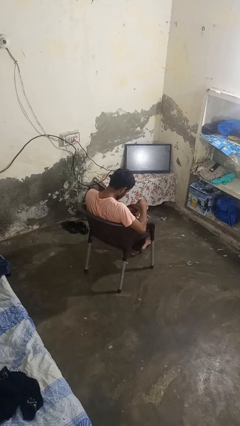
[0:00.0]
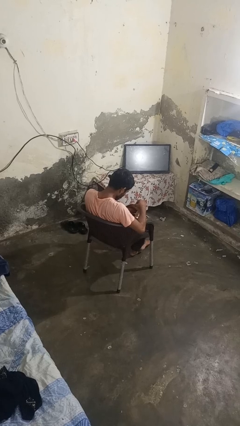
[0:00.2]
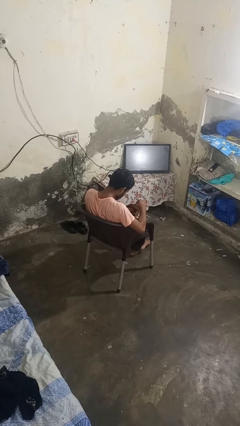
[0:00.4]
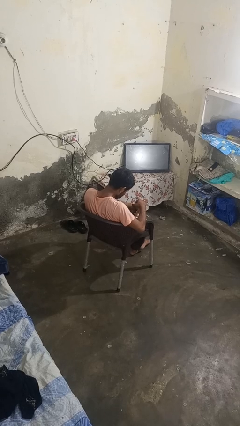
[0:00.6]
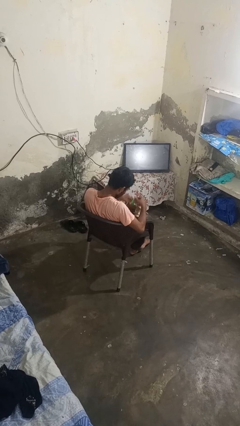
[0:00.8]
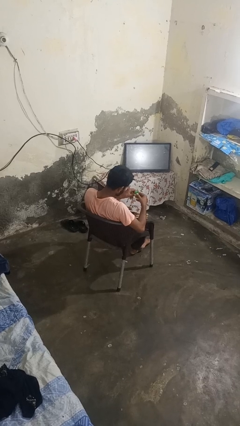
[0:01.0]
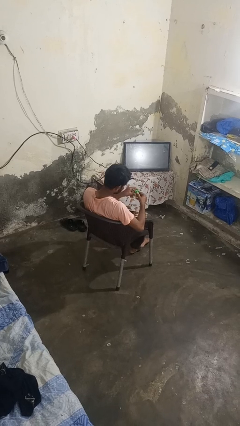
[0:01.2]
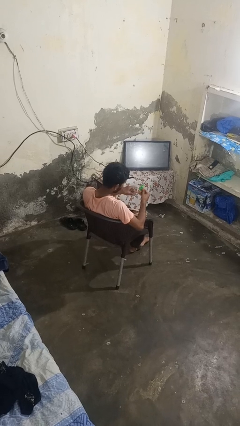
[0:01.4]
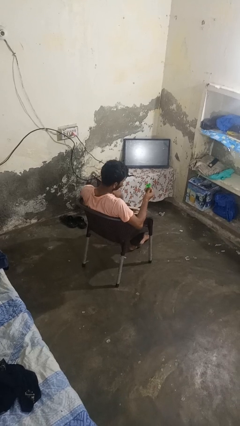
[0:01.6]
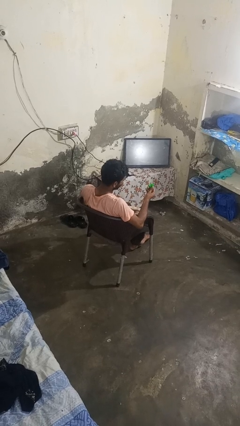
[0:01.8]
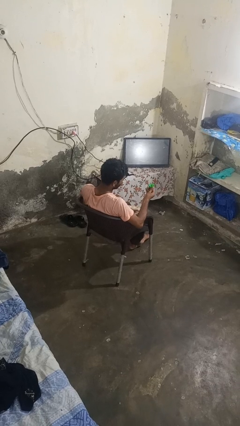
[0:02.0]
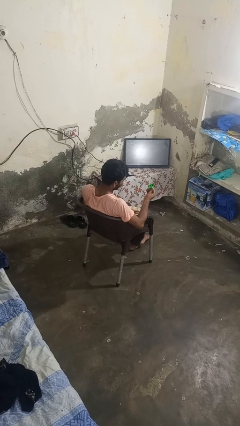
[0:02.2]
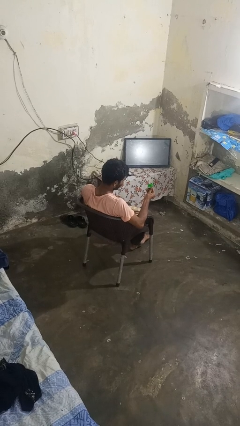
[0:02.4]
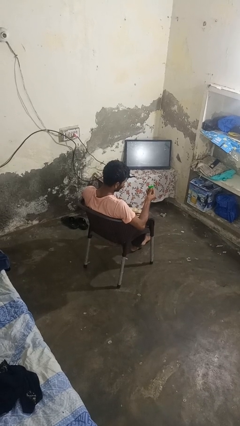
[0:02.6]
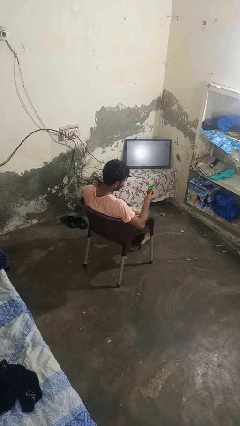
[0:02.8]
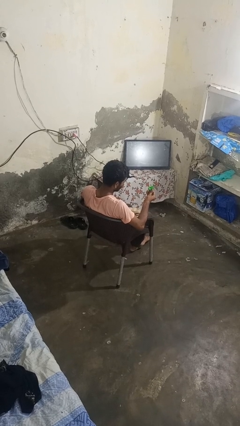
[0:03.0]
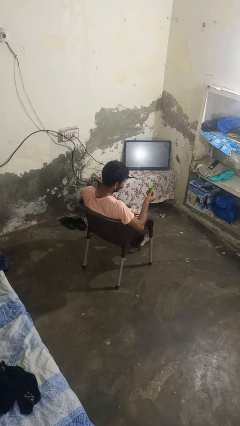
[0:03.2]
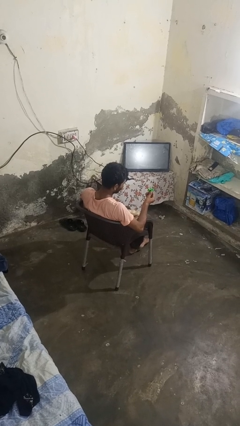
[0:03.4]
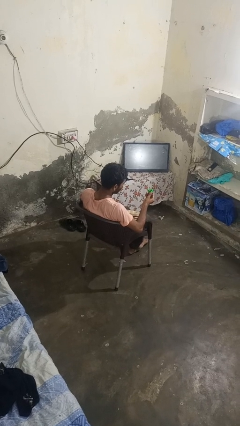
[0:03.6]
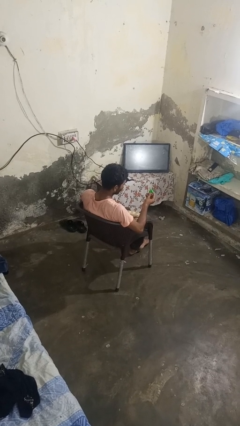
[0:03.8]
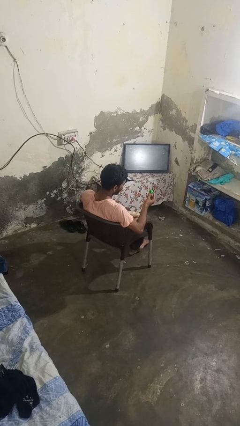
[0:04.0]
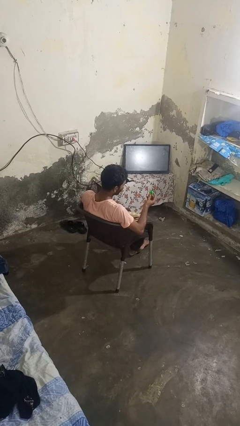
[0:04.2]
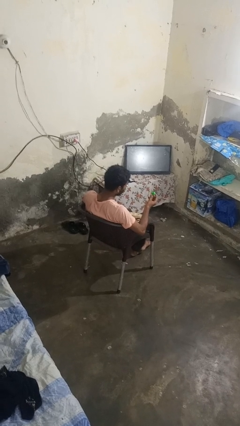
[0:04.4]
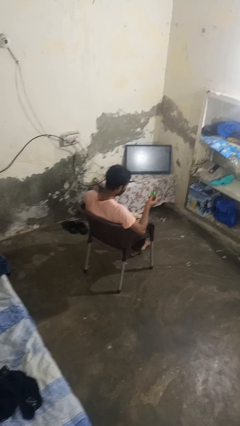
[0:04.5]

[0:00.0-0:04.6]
person takes object from purse

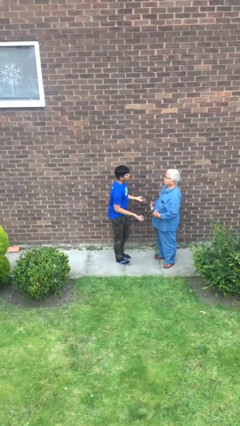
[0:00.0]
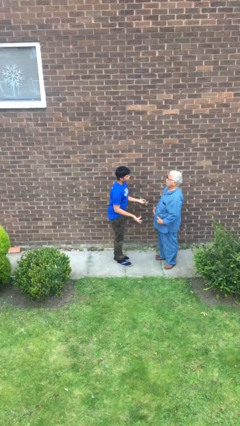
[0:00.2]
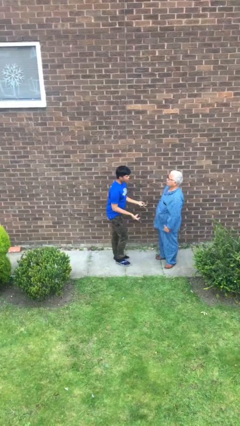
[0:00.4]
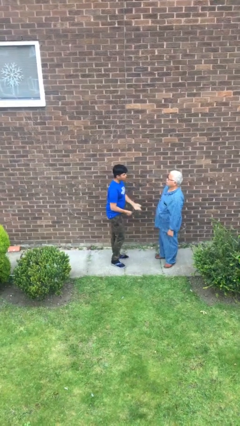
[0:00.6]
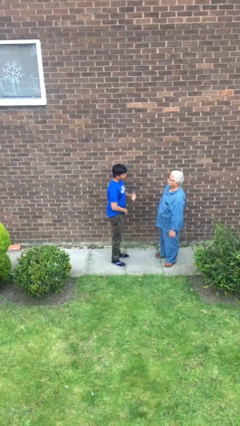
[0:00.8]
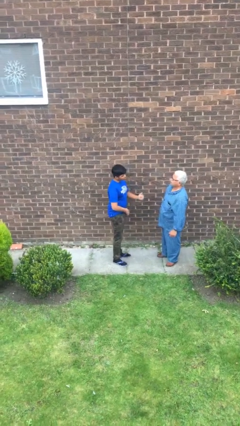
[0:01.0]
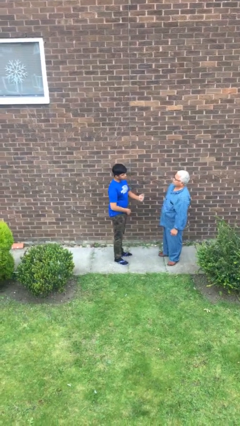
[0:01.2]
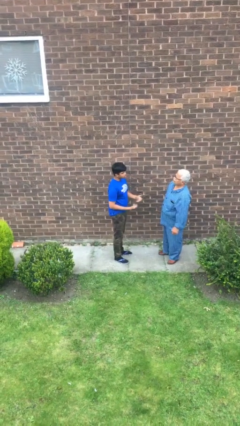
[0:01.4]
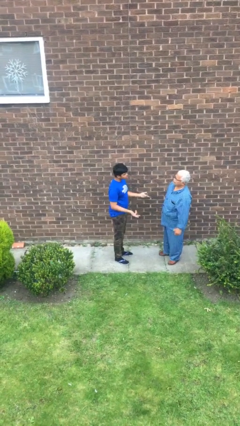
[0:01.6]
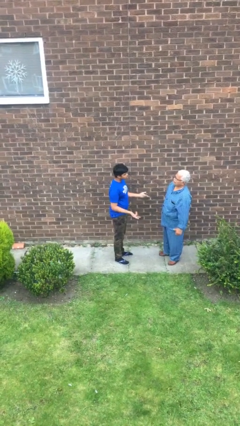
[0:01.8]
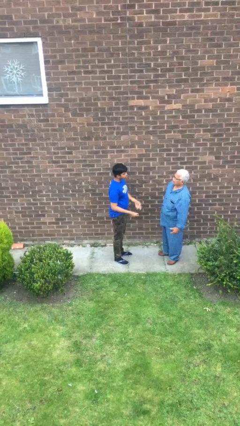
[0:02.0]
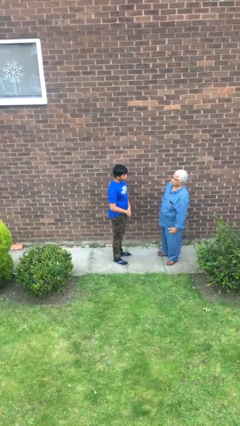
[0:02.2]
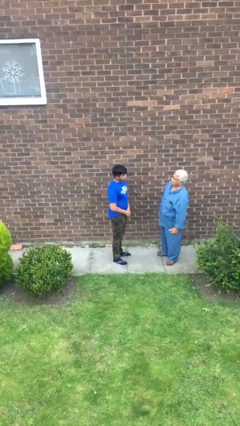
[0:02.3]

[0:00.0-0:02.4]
person talks to person

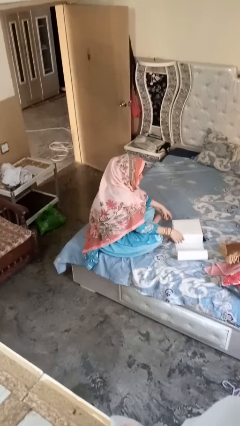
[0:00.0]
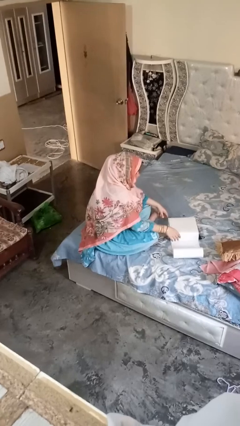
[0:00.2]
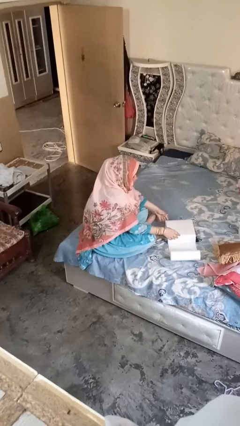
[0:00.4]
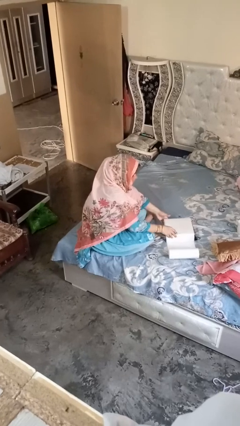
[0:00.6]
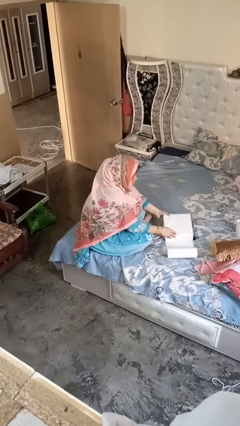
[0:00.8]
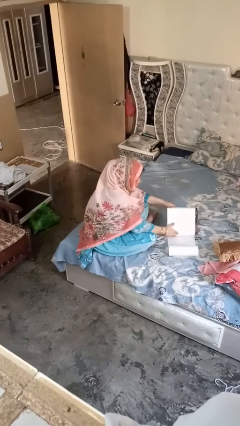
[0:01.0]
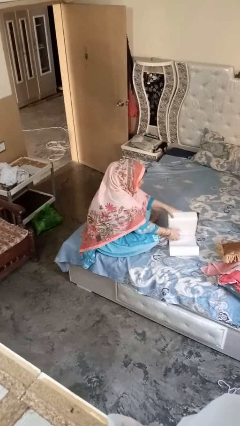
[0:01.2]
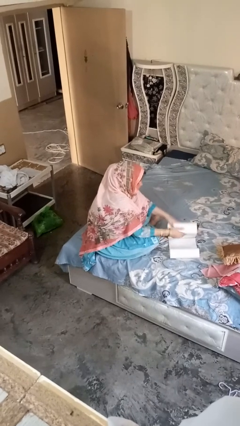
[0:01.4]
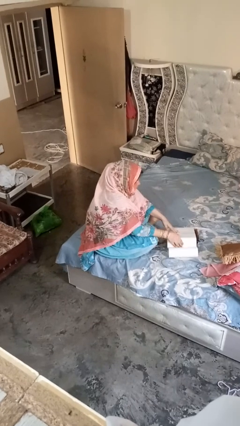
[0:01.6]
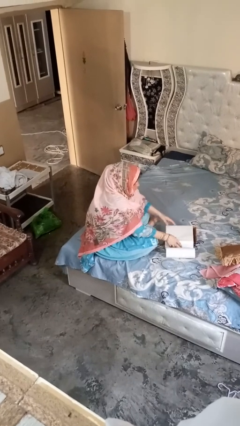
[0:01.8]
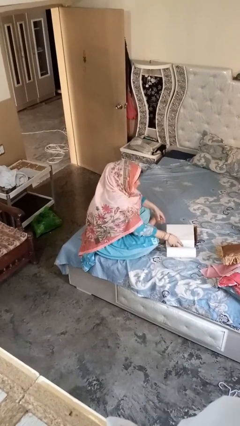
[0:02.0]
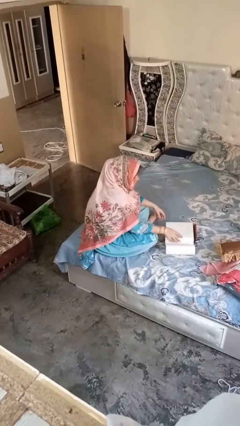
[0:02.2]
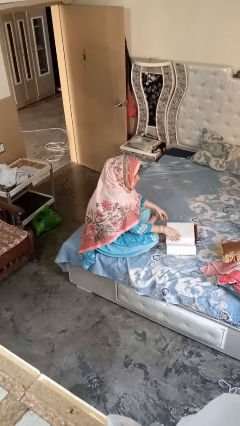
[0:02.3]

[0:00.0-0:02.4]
person wraps box

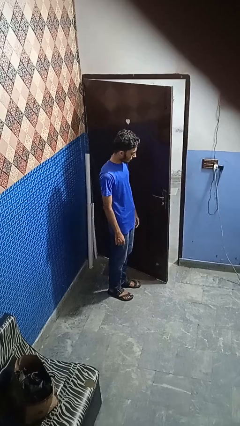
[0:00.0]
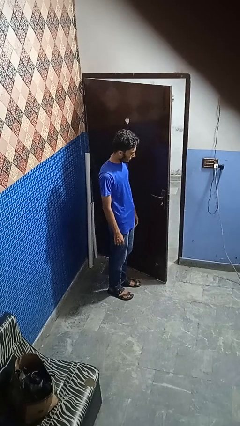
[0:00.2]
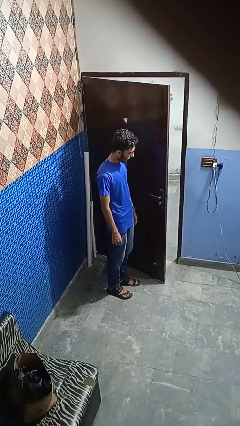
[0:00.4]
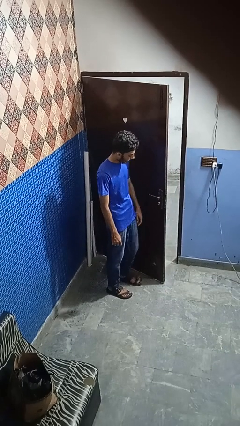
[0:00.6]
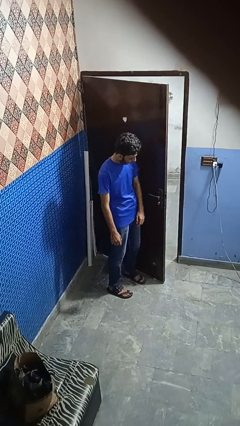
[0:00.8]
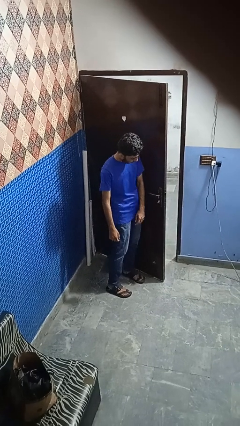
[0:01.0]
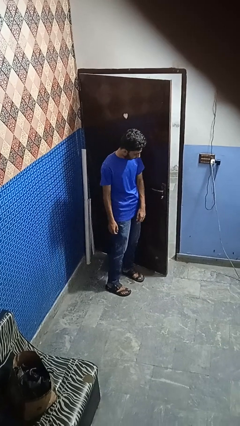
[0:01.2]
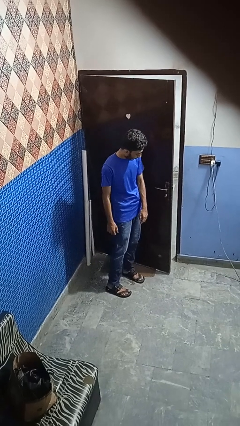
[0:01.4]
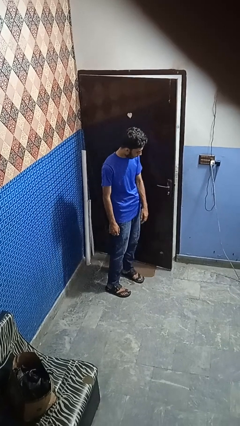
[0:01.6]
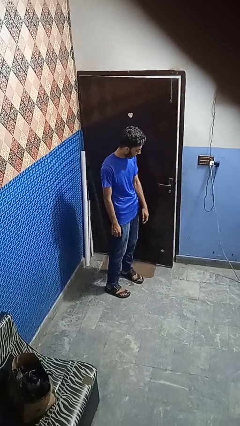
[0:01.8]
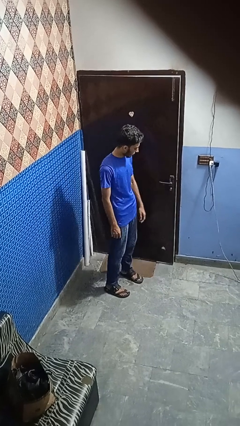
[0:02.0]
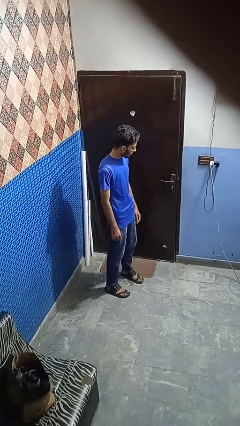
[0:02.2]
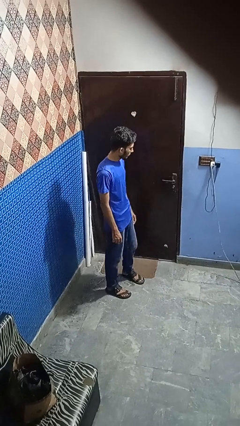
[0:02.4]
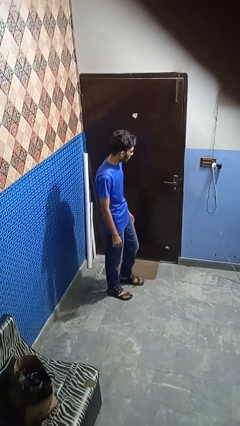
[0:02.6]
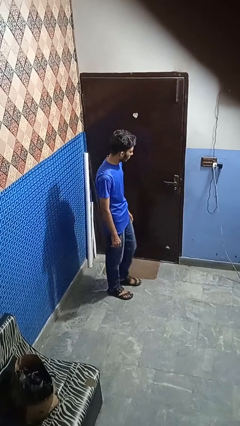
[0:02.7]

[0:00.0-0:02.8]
person closes door with hip

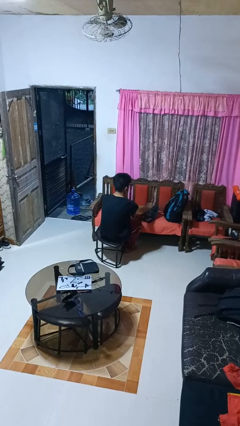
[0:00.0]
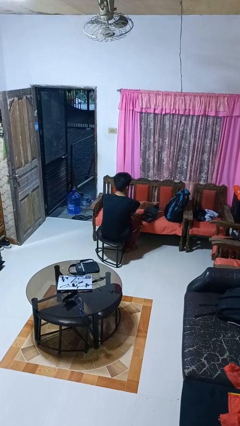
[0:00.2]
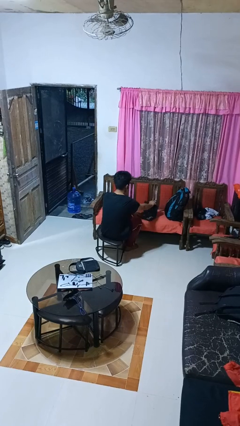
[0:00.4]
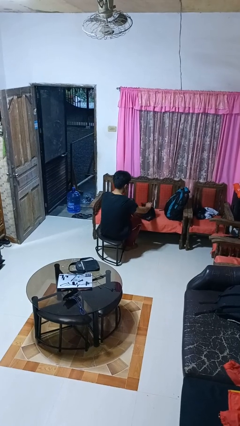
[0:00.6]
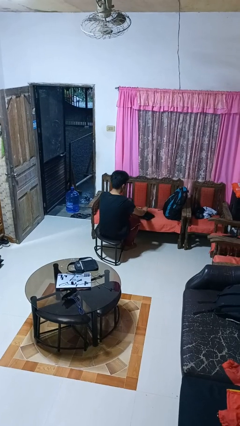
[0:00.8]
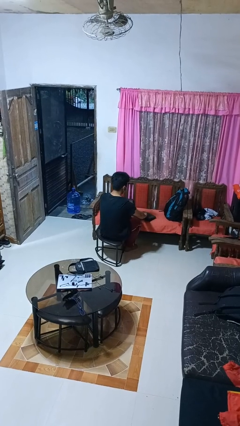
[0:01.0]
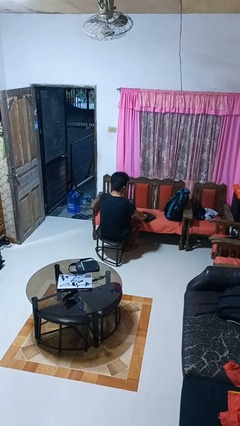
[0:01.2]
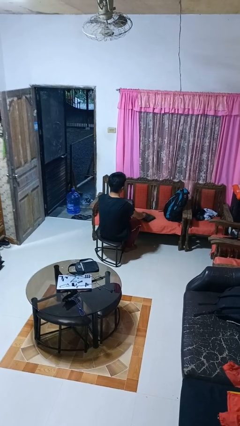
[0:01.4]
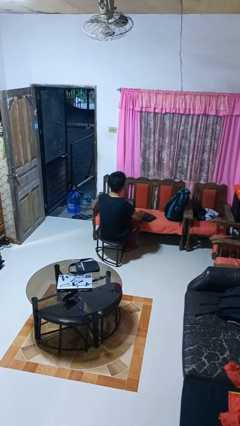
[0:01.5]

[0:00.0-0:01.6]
person closes laptop

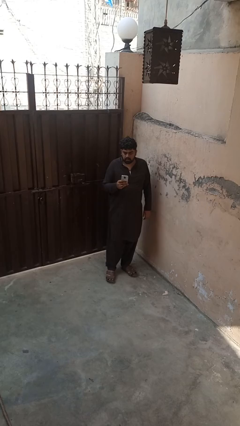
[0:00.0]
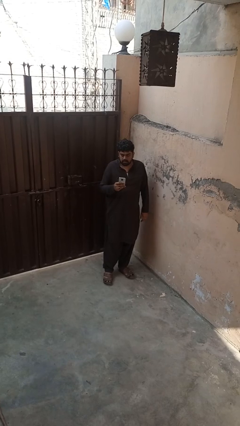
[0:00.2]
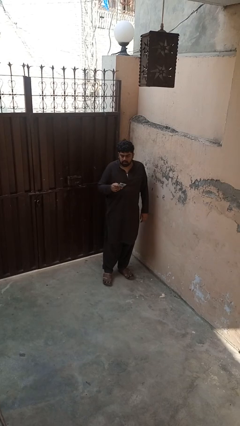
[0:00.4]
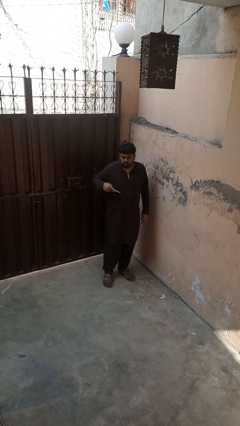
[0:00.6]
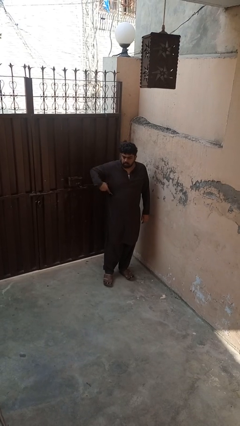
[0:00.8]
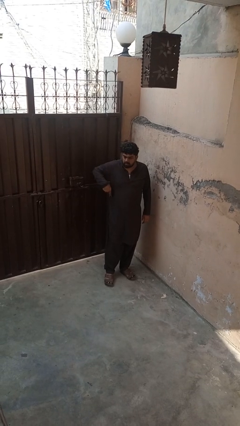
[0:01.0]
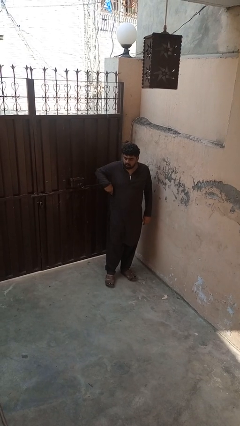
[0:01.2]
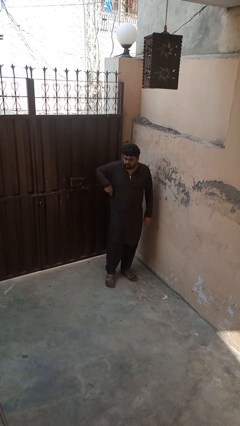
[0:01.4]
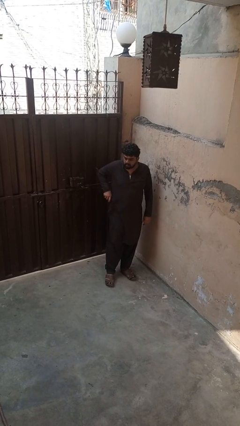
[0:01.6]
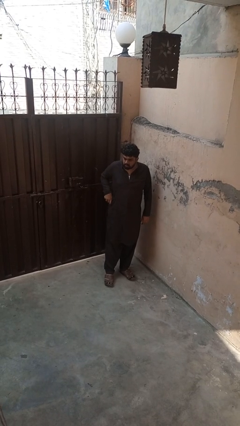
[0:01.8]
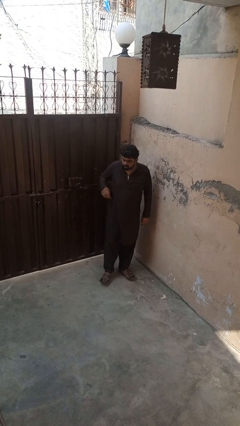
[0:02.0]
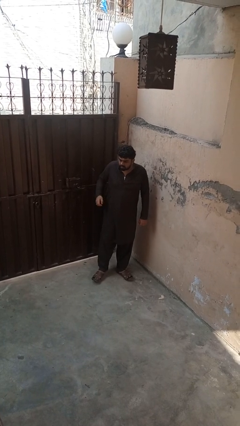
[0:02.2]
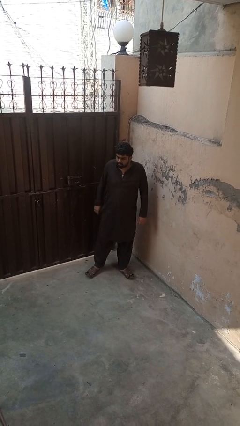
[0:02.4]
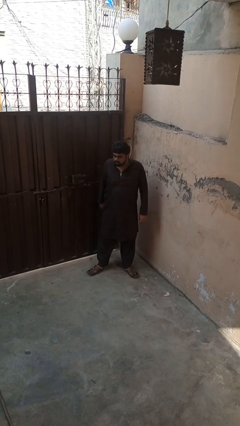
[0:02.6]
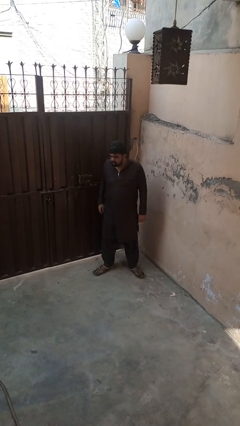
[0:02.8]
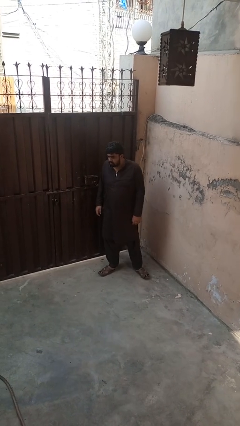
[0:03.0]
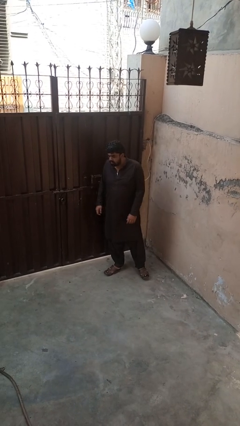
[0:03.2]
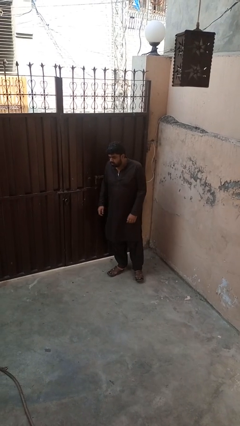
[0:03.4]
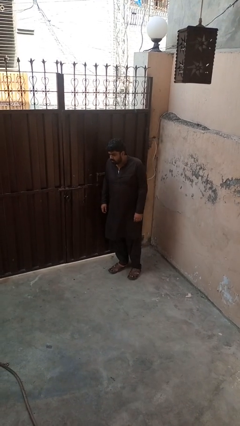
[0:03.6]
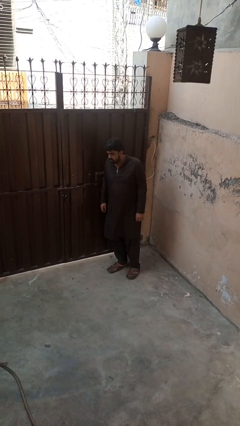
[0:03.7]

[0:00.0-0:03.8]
person puts phone into pocket
